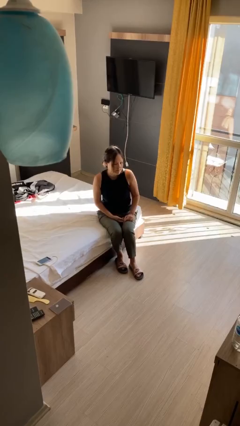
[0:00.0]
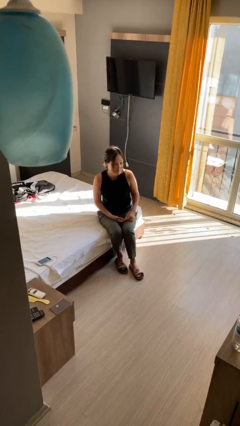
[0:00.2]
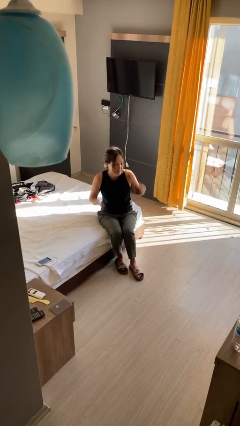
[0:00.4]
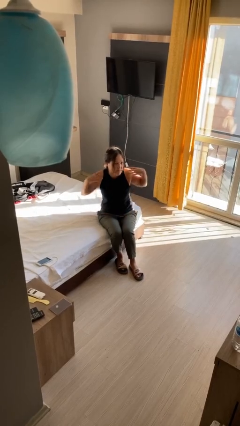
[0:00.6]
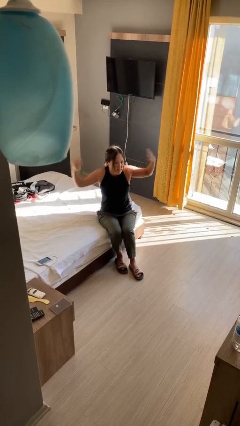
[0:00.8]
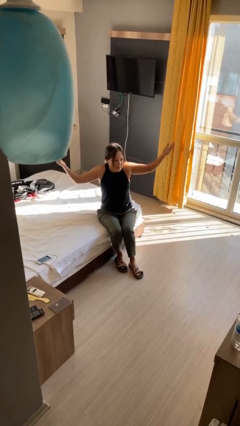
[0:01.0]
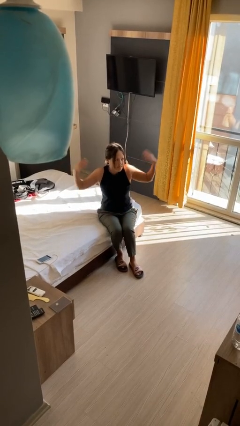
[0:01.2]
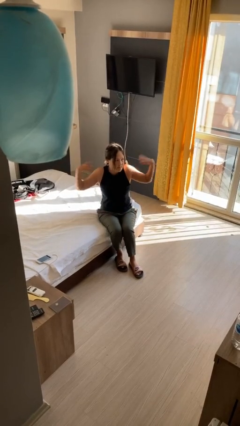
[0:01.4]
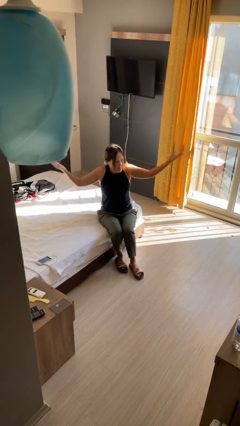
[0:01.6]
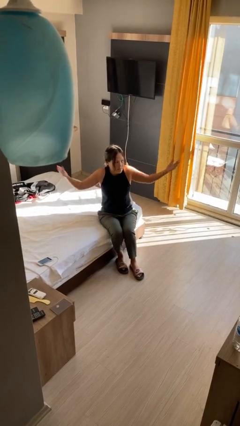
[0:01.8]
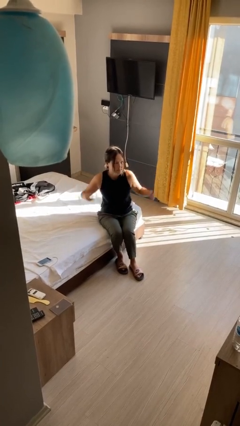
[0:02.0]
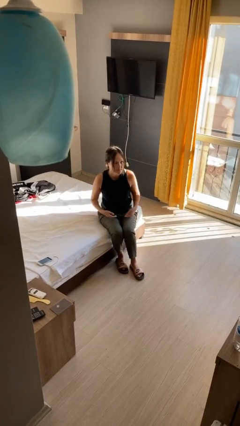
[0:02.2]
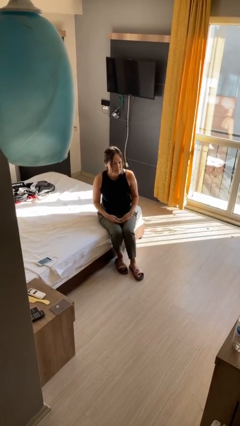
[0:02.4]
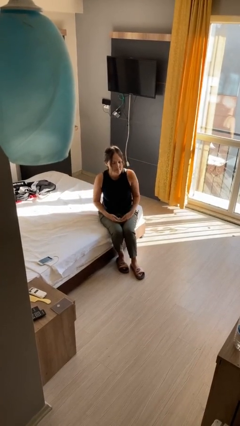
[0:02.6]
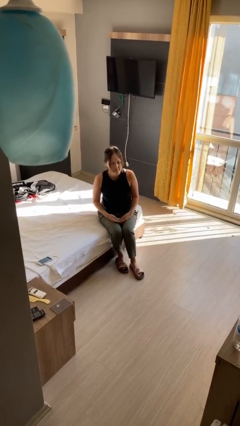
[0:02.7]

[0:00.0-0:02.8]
person shrugs

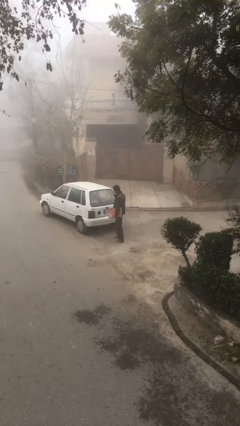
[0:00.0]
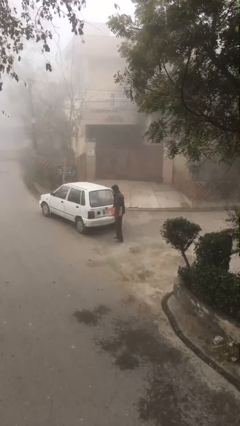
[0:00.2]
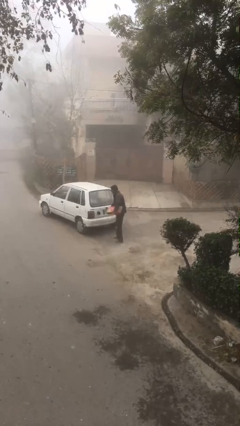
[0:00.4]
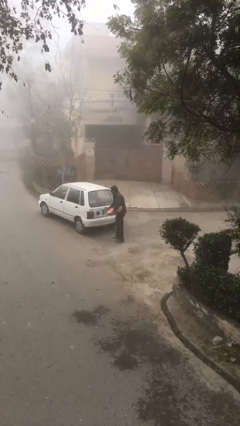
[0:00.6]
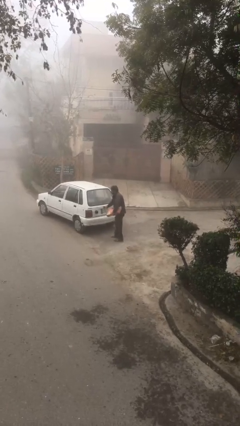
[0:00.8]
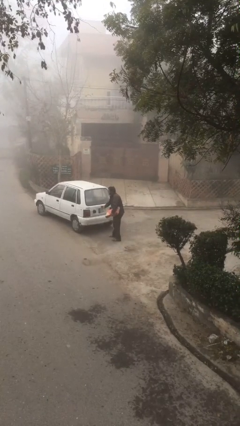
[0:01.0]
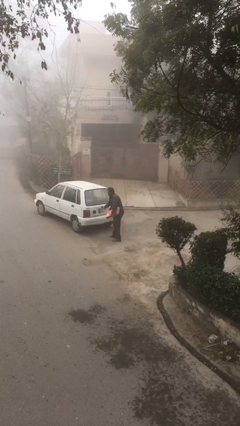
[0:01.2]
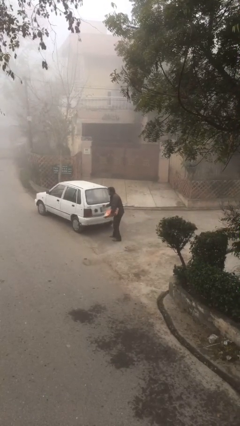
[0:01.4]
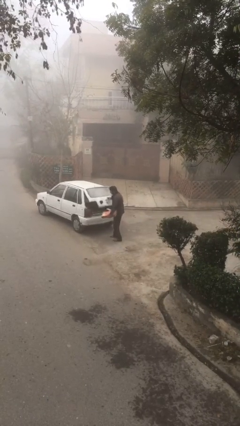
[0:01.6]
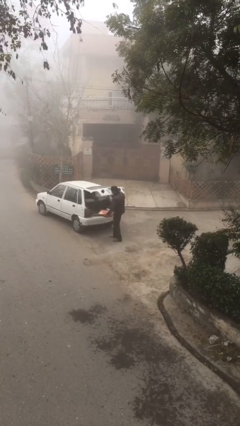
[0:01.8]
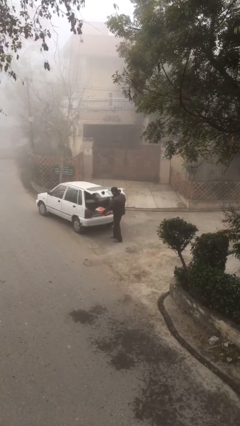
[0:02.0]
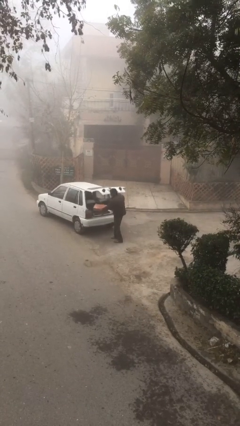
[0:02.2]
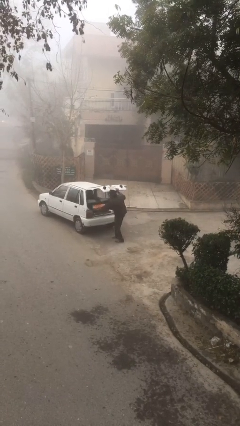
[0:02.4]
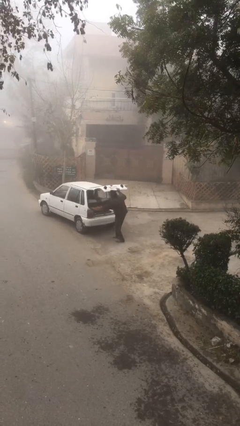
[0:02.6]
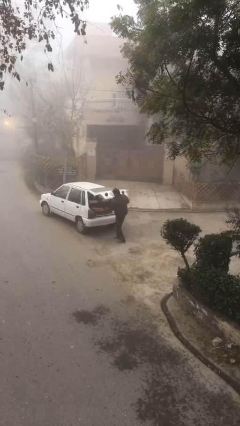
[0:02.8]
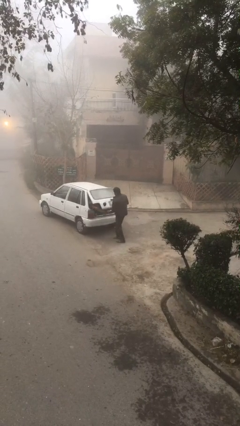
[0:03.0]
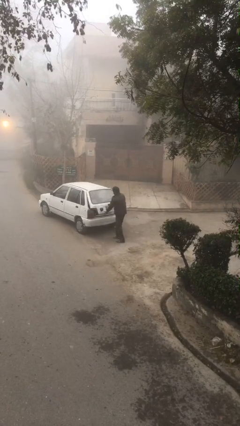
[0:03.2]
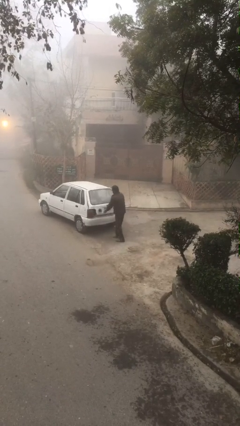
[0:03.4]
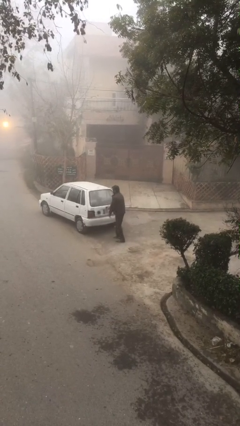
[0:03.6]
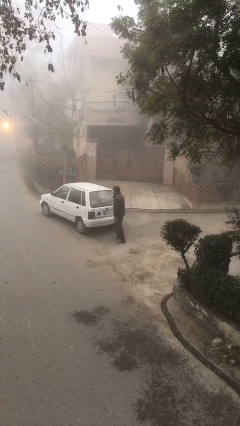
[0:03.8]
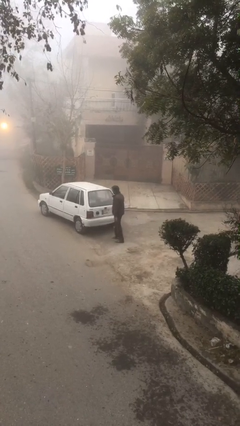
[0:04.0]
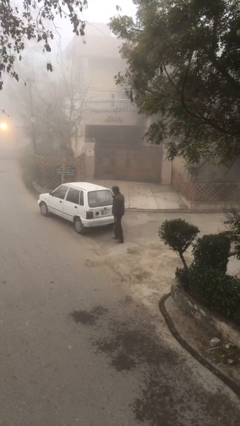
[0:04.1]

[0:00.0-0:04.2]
person loads car

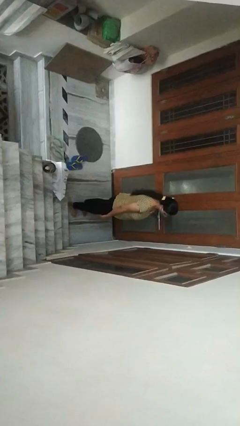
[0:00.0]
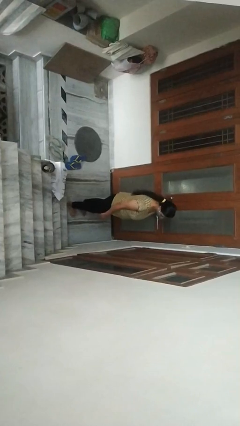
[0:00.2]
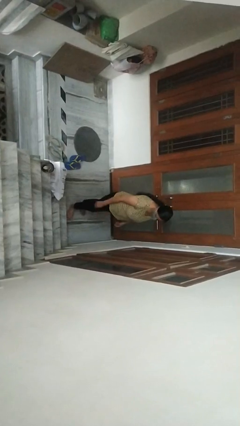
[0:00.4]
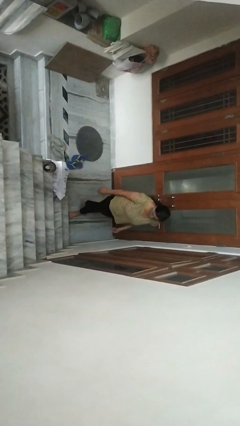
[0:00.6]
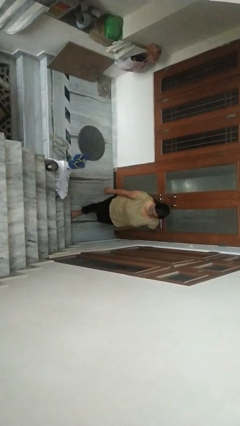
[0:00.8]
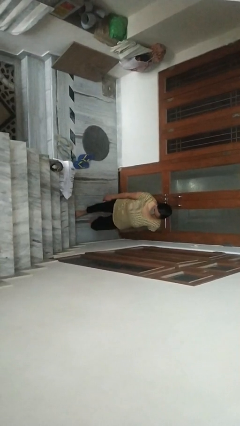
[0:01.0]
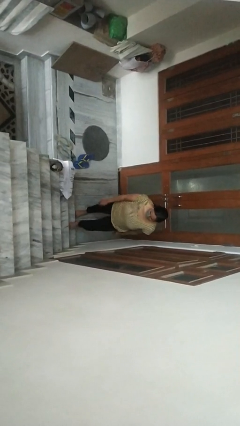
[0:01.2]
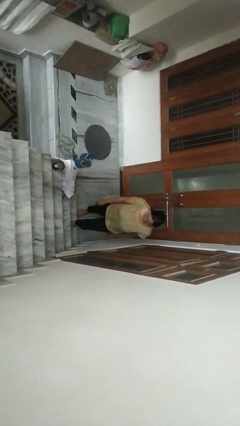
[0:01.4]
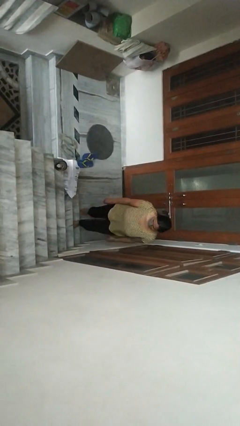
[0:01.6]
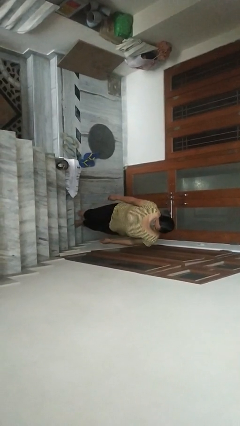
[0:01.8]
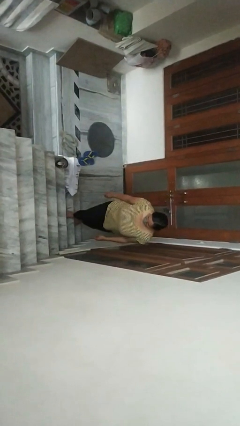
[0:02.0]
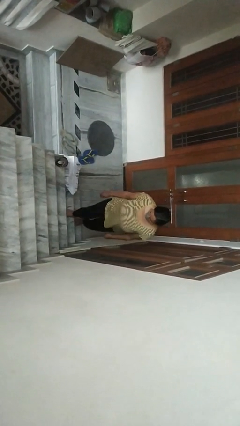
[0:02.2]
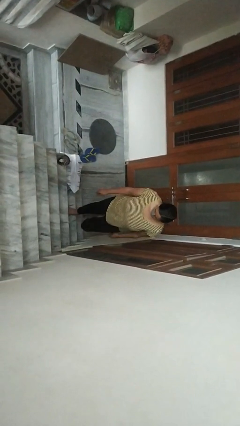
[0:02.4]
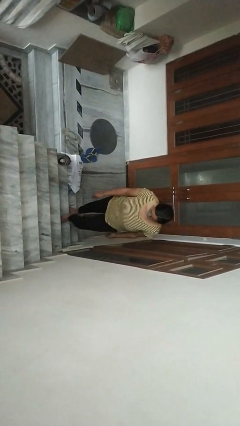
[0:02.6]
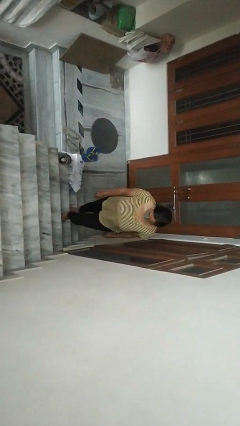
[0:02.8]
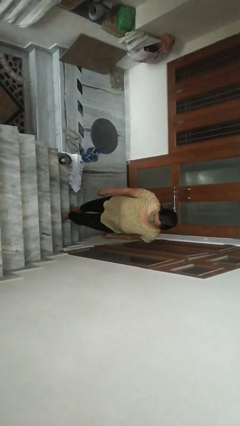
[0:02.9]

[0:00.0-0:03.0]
person climbs up stairs

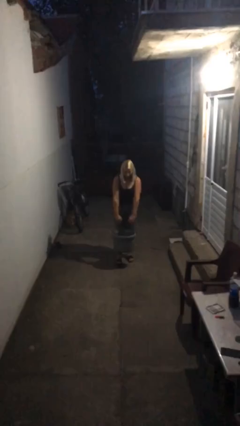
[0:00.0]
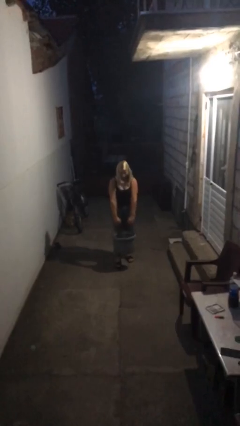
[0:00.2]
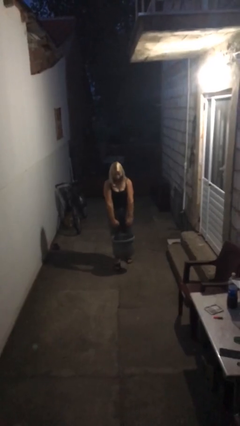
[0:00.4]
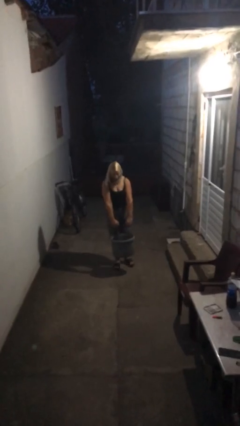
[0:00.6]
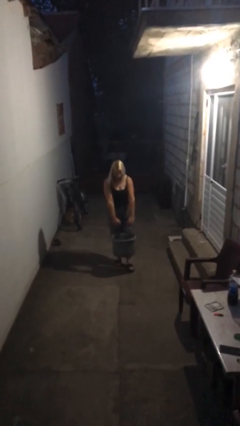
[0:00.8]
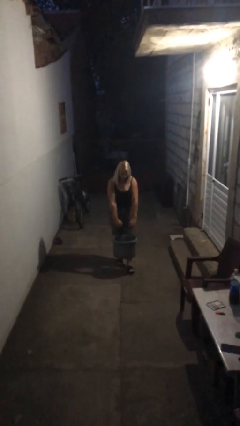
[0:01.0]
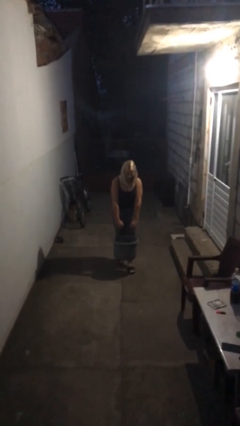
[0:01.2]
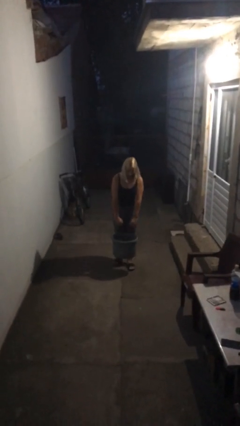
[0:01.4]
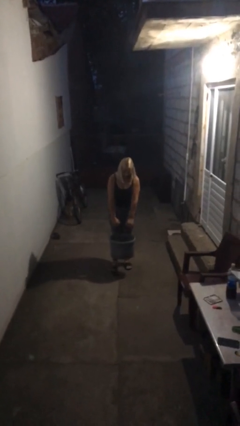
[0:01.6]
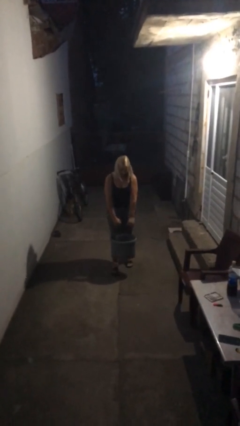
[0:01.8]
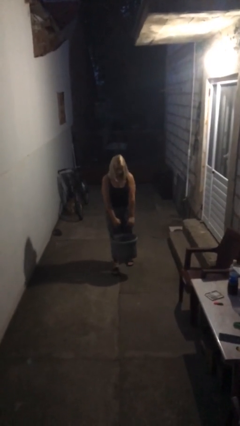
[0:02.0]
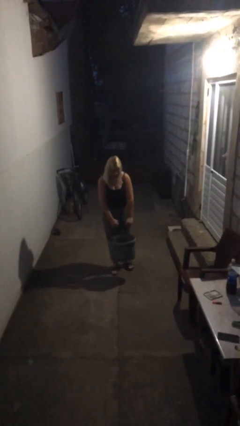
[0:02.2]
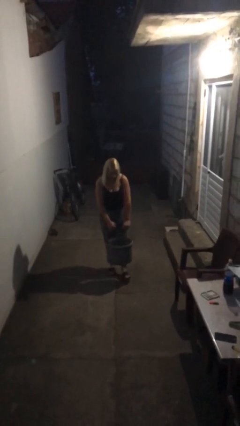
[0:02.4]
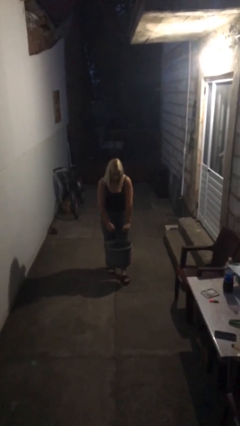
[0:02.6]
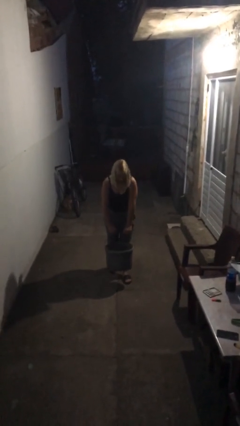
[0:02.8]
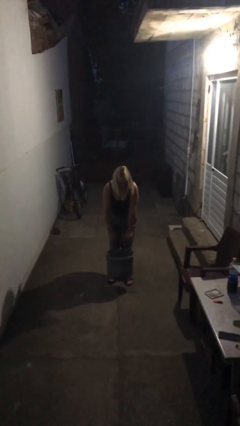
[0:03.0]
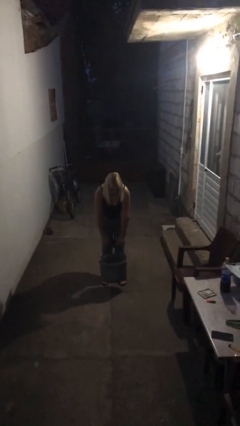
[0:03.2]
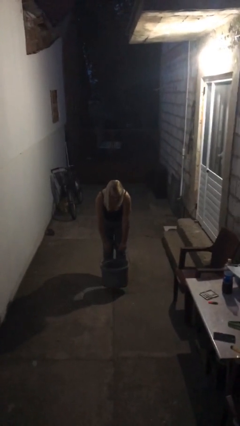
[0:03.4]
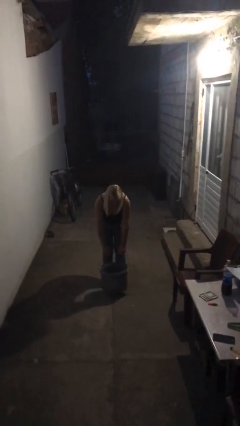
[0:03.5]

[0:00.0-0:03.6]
person carries heavy object

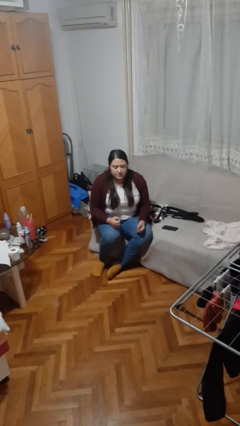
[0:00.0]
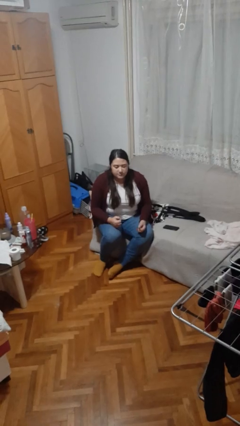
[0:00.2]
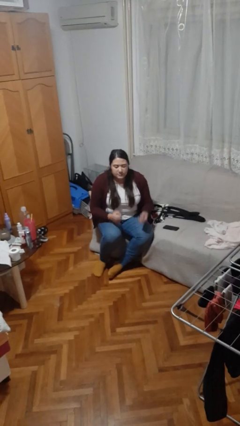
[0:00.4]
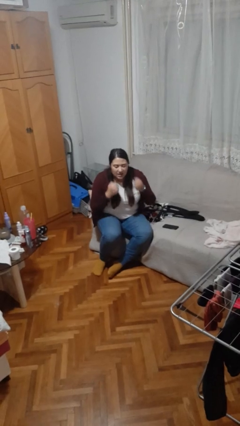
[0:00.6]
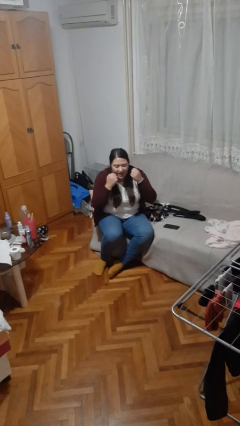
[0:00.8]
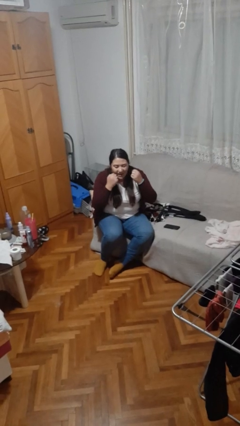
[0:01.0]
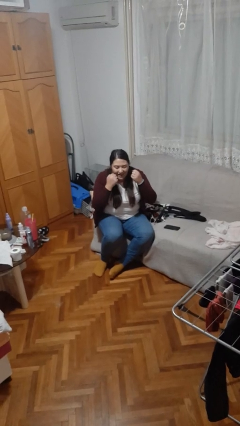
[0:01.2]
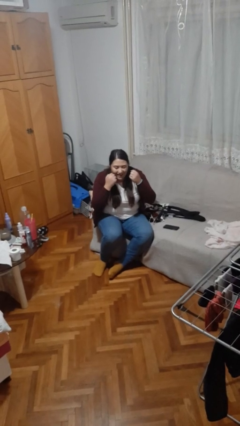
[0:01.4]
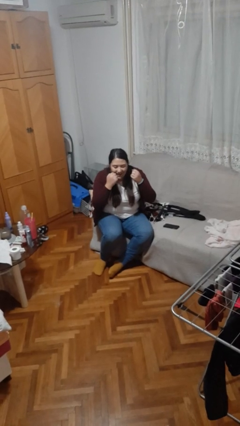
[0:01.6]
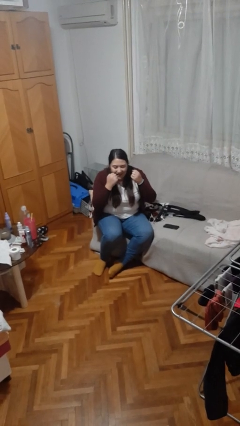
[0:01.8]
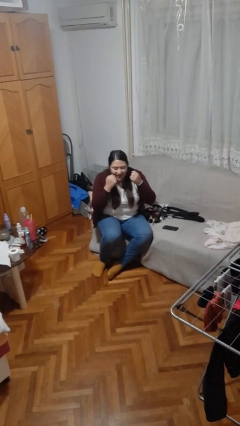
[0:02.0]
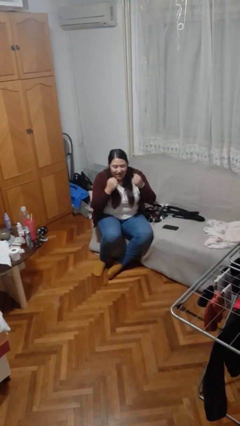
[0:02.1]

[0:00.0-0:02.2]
person flosses

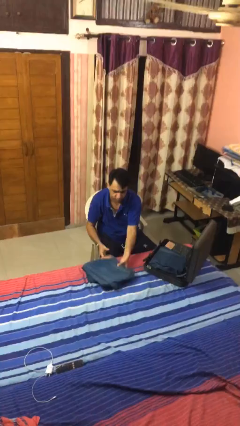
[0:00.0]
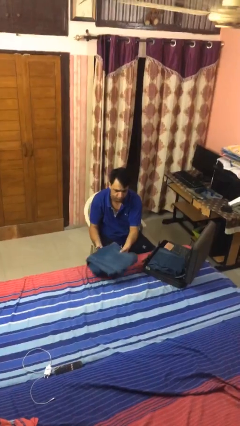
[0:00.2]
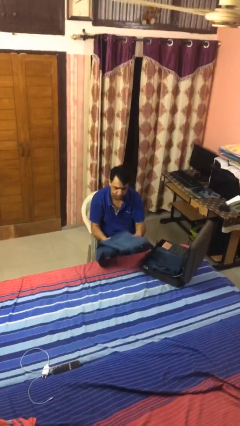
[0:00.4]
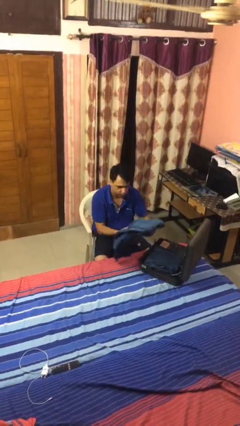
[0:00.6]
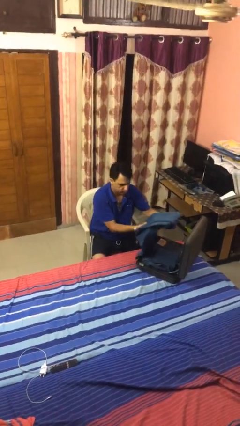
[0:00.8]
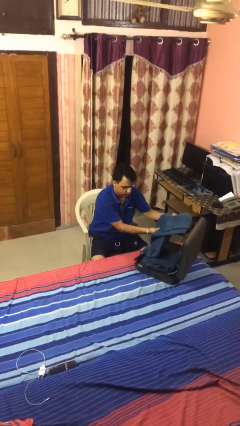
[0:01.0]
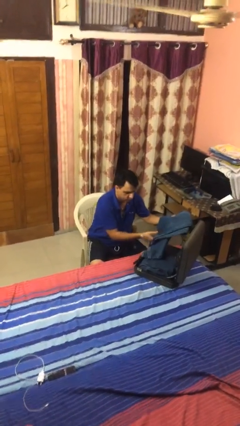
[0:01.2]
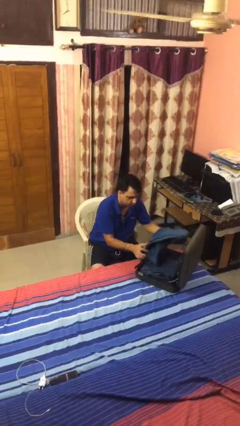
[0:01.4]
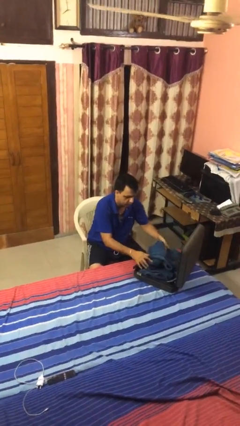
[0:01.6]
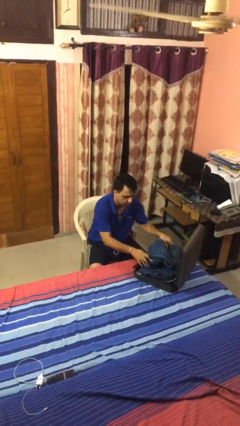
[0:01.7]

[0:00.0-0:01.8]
person loads clothes into suitcase
